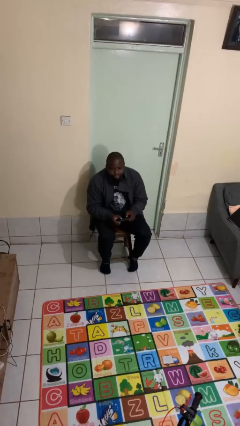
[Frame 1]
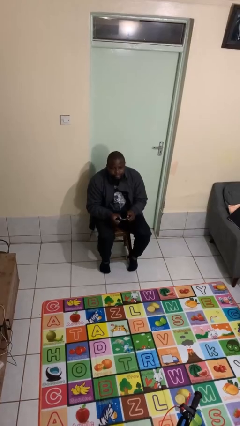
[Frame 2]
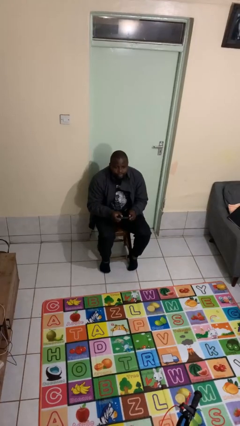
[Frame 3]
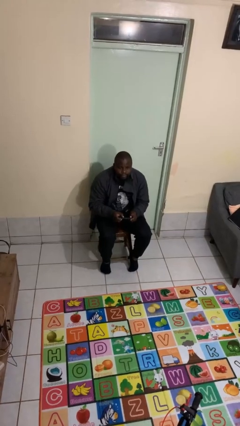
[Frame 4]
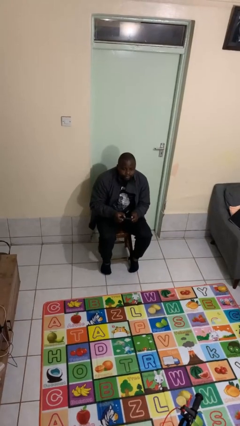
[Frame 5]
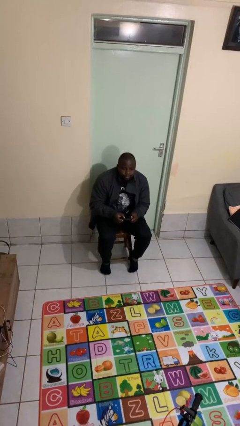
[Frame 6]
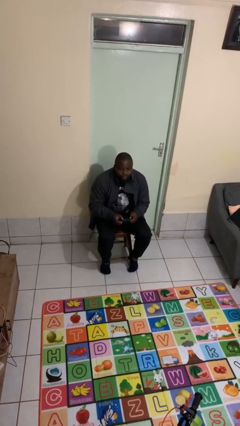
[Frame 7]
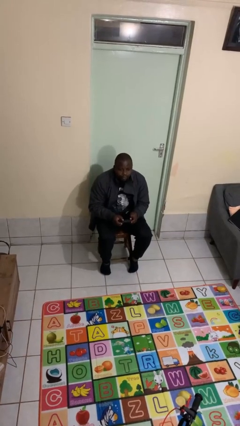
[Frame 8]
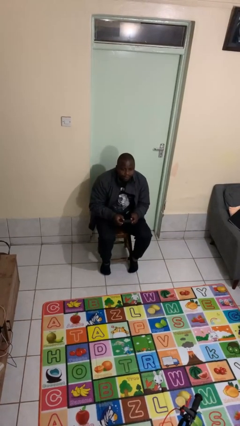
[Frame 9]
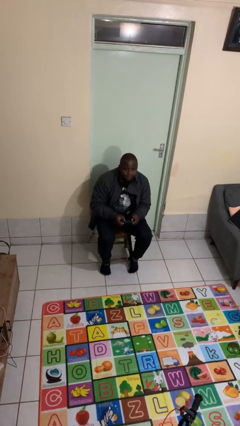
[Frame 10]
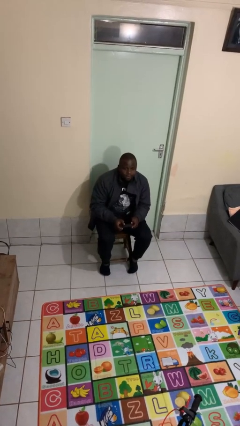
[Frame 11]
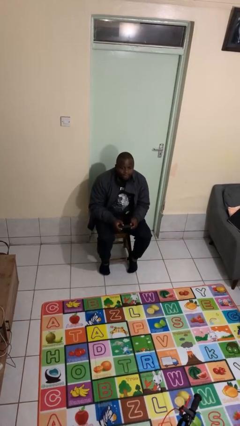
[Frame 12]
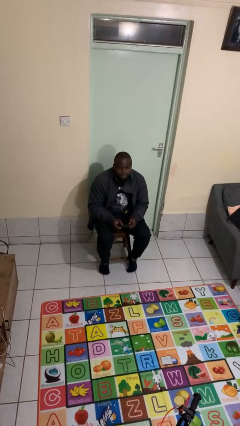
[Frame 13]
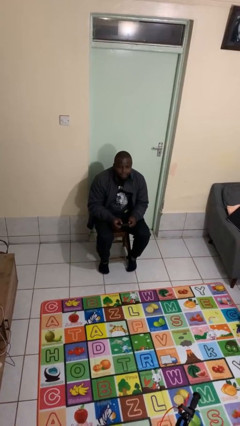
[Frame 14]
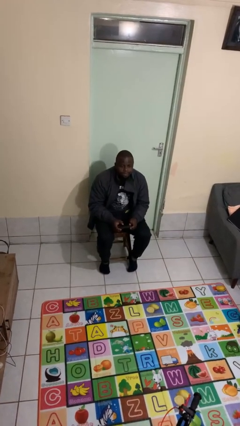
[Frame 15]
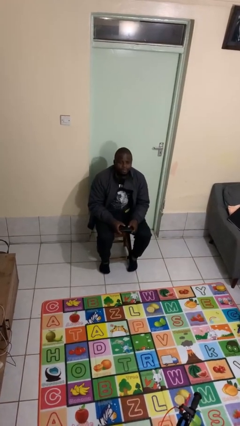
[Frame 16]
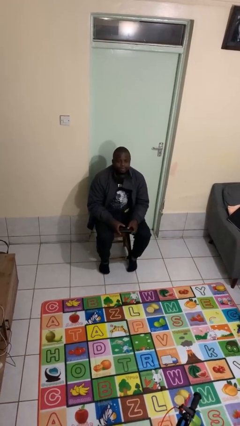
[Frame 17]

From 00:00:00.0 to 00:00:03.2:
person interacts with handheld game

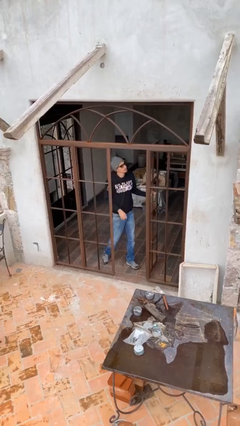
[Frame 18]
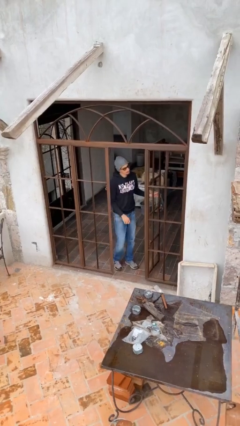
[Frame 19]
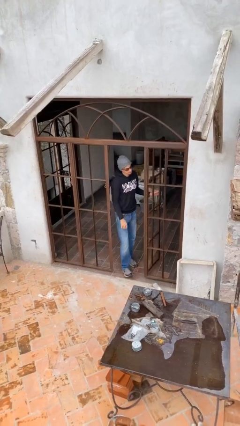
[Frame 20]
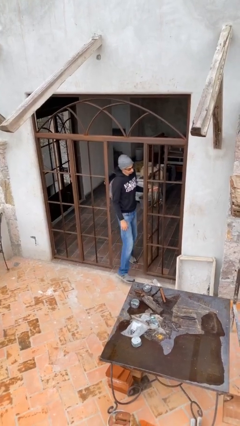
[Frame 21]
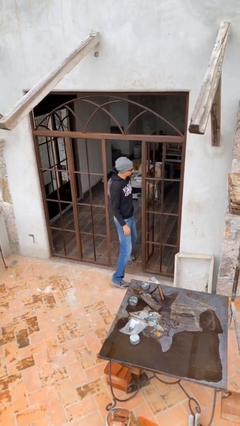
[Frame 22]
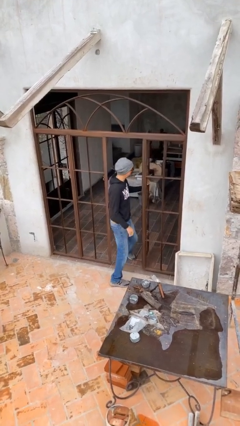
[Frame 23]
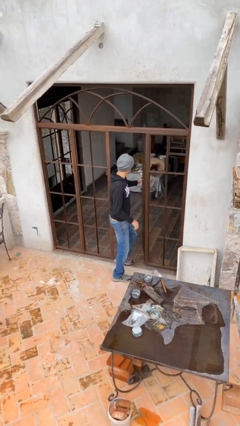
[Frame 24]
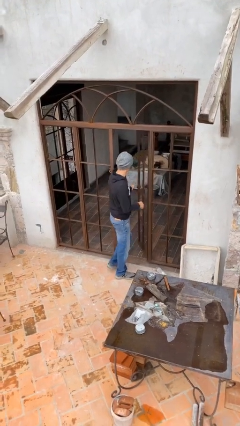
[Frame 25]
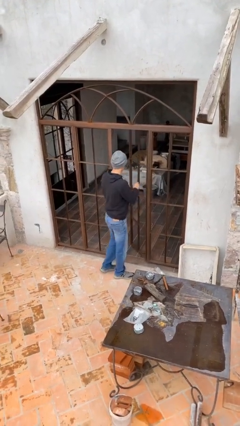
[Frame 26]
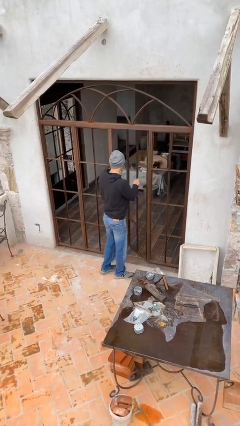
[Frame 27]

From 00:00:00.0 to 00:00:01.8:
person exits scene through structure

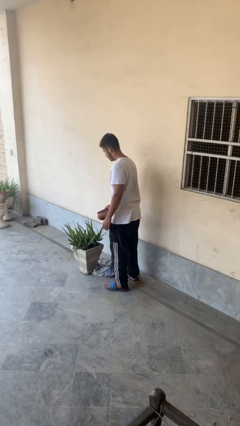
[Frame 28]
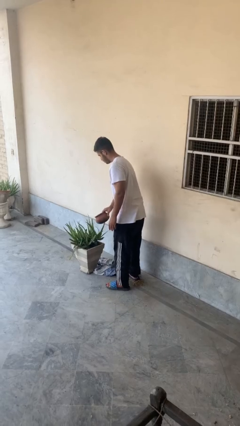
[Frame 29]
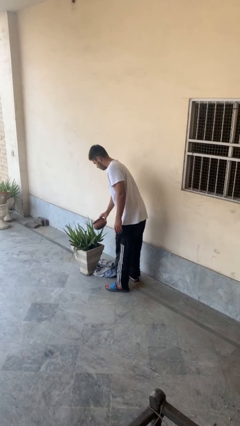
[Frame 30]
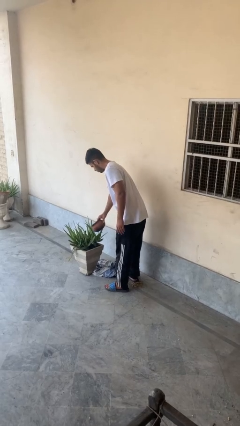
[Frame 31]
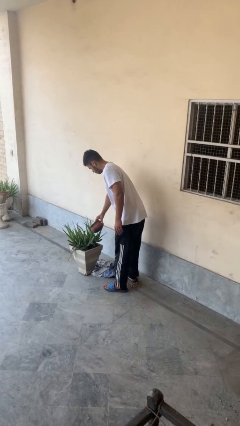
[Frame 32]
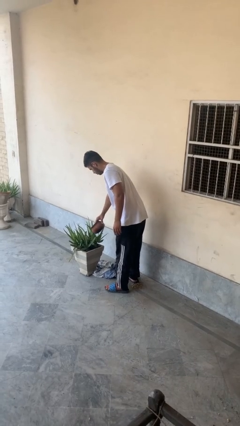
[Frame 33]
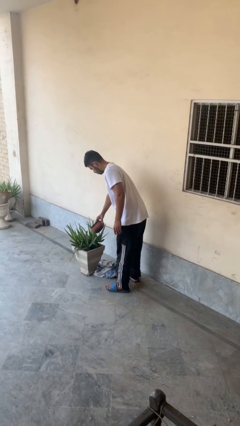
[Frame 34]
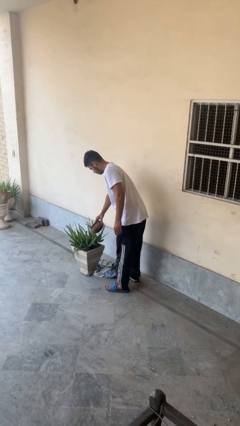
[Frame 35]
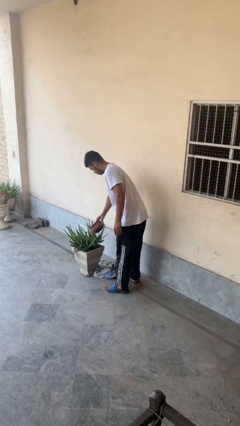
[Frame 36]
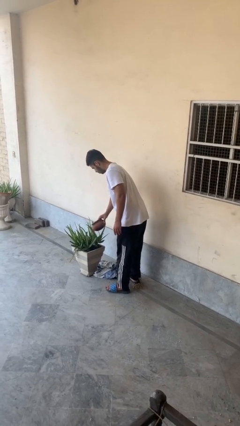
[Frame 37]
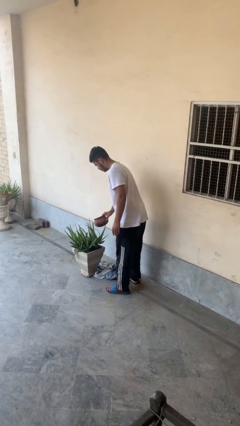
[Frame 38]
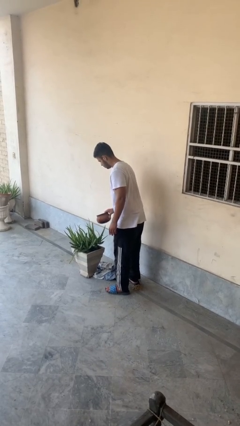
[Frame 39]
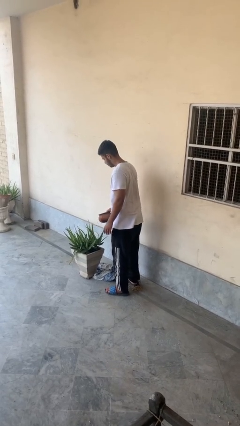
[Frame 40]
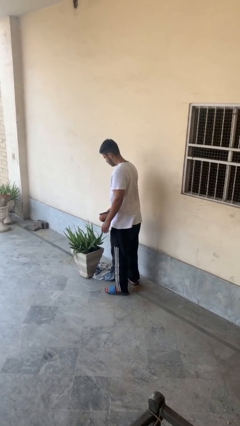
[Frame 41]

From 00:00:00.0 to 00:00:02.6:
person waters houseplant

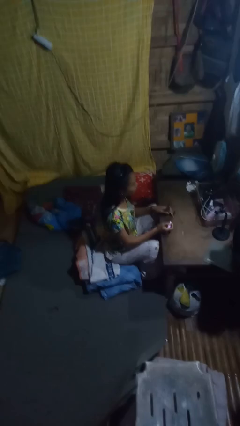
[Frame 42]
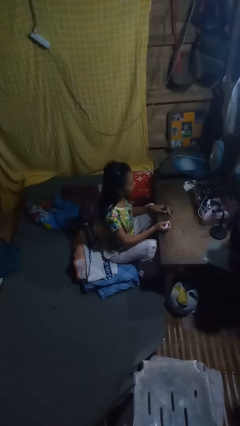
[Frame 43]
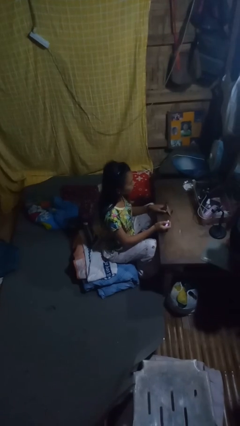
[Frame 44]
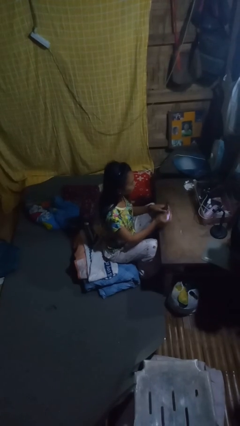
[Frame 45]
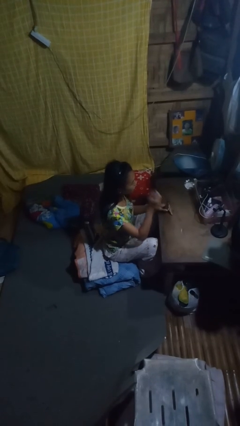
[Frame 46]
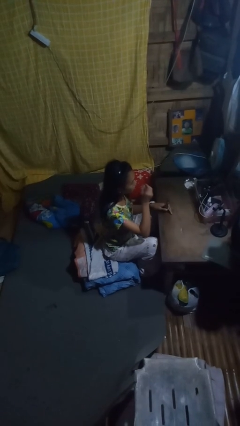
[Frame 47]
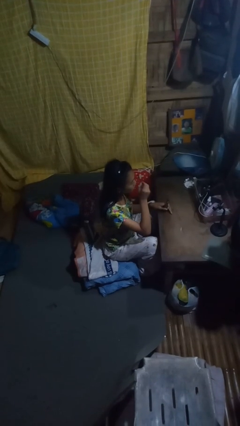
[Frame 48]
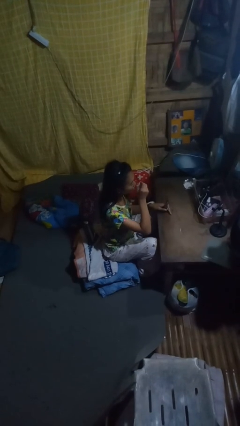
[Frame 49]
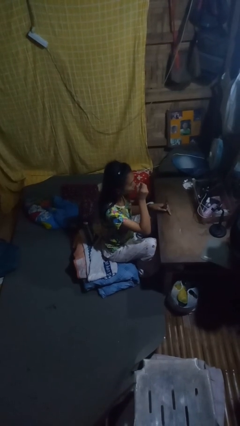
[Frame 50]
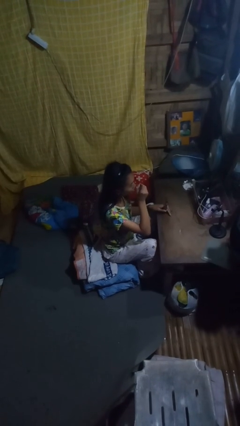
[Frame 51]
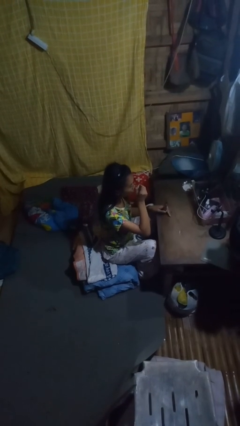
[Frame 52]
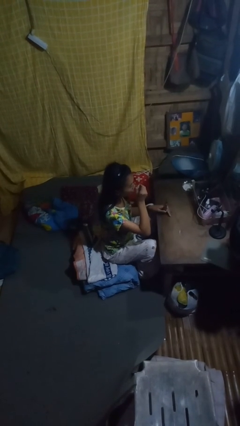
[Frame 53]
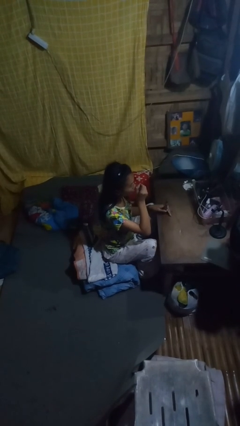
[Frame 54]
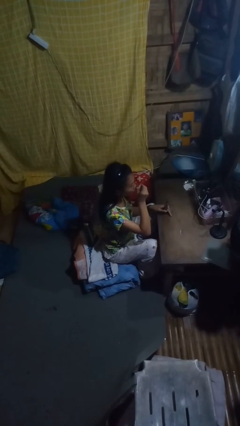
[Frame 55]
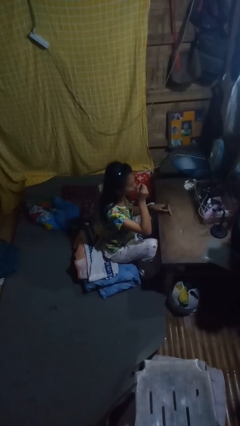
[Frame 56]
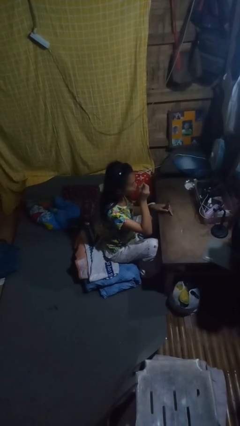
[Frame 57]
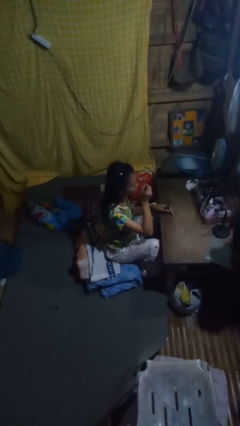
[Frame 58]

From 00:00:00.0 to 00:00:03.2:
person applies eye makeup

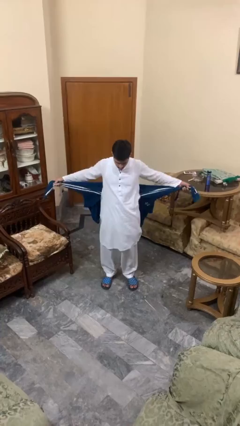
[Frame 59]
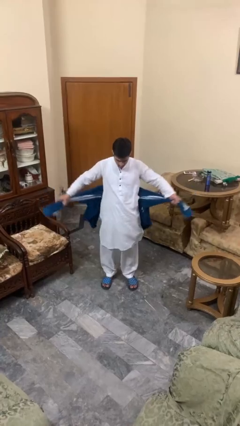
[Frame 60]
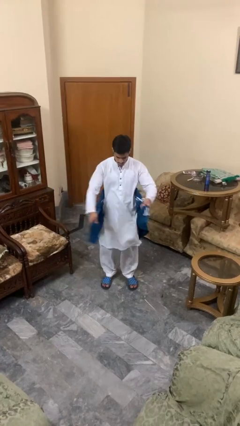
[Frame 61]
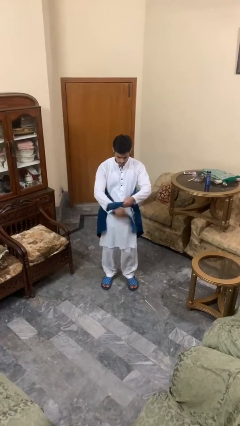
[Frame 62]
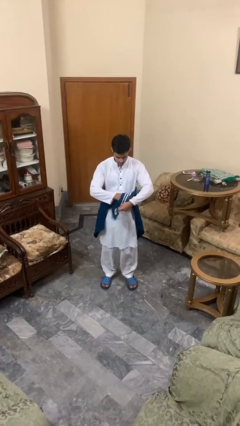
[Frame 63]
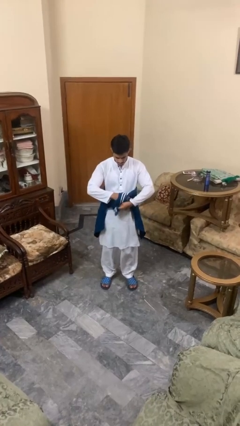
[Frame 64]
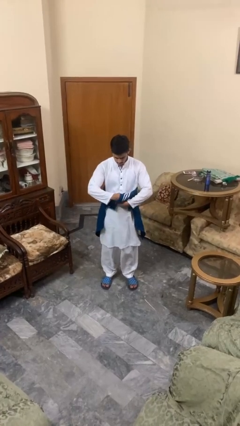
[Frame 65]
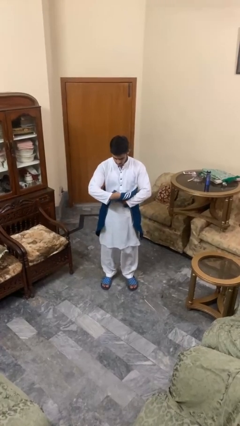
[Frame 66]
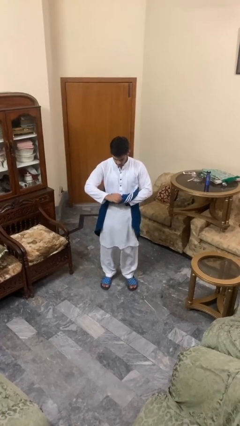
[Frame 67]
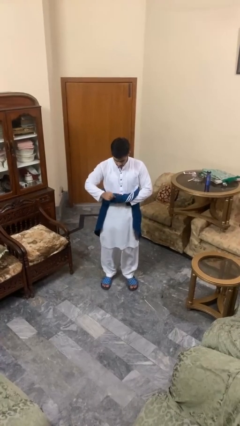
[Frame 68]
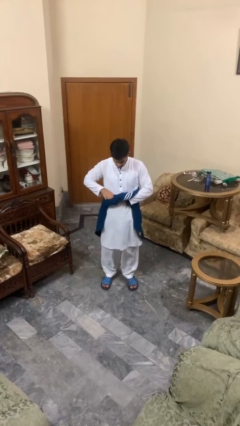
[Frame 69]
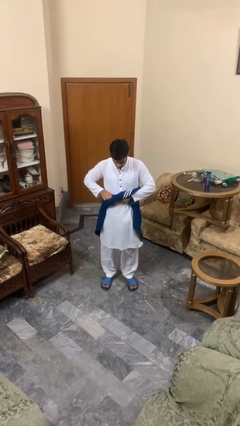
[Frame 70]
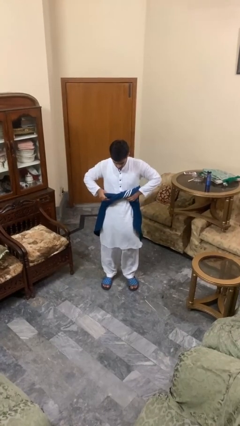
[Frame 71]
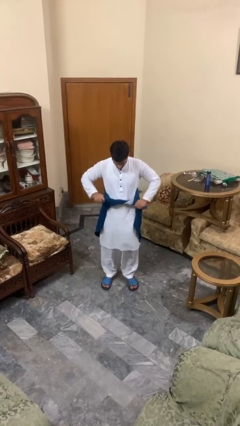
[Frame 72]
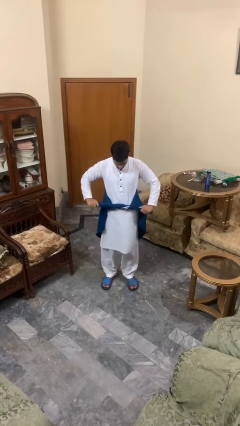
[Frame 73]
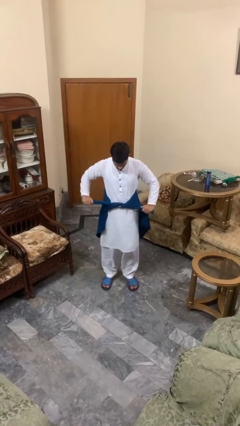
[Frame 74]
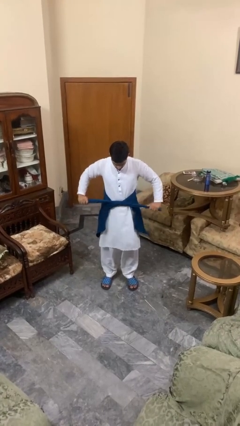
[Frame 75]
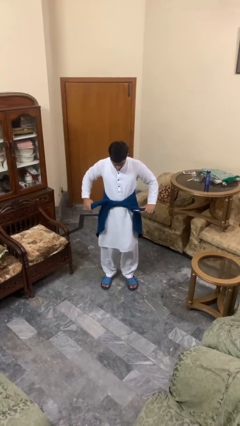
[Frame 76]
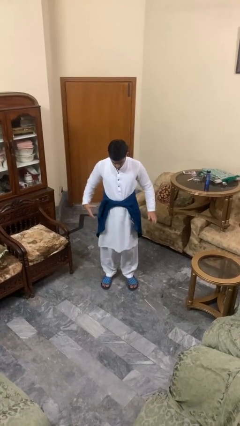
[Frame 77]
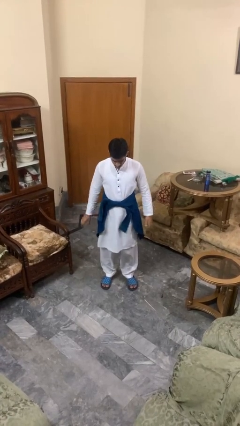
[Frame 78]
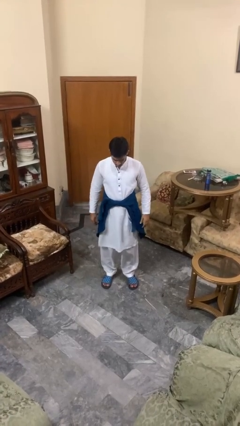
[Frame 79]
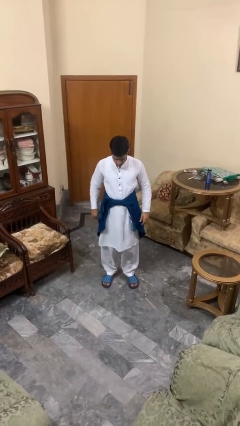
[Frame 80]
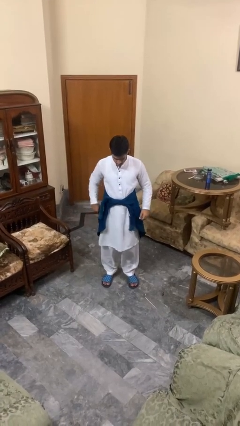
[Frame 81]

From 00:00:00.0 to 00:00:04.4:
person ties jacket around waist

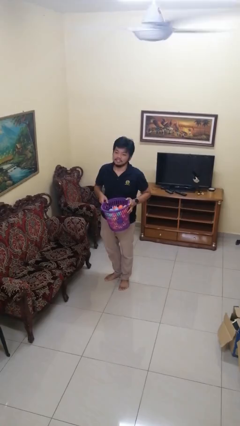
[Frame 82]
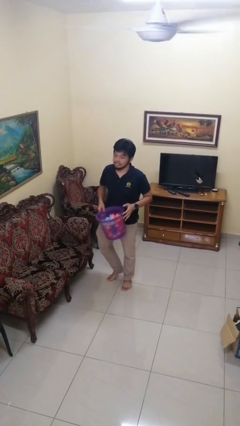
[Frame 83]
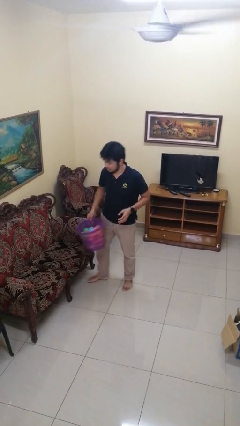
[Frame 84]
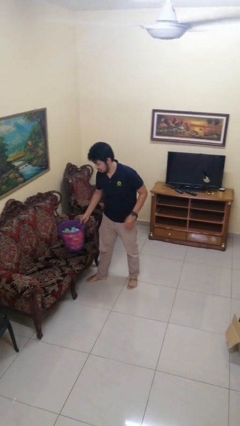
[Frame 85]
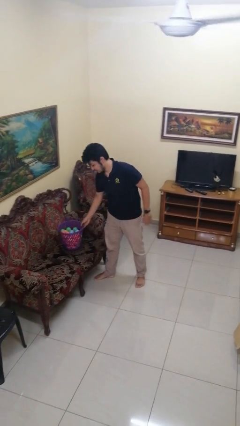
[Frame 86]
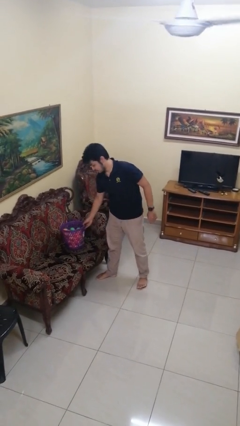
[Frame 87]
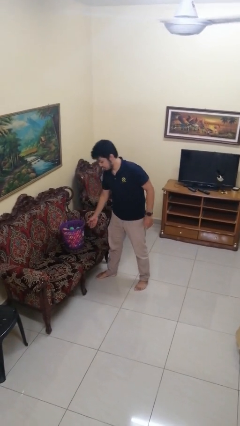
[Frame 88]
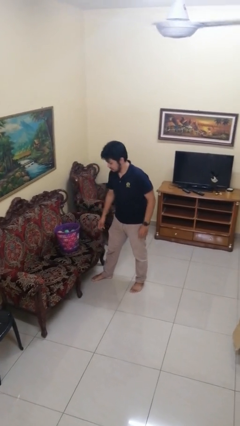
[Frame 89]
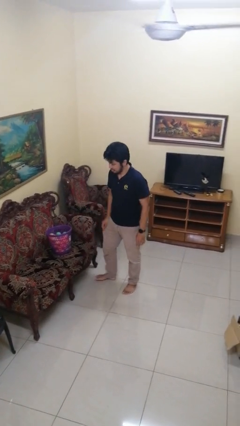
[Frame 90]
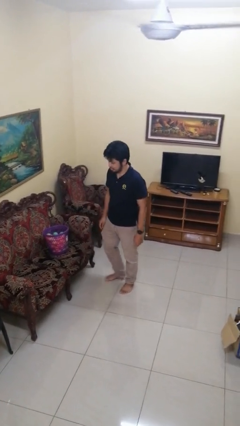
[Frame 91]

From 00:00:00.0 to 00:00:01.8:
person puts down object on couch

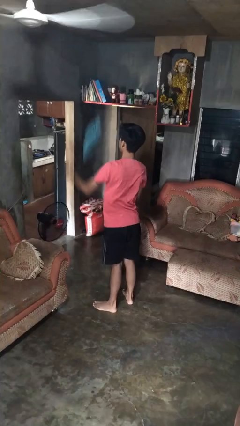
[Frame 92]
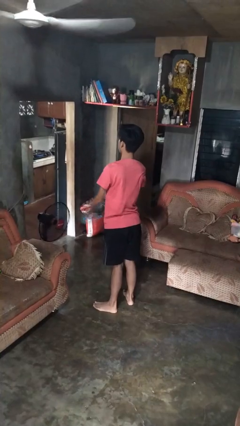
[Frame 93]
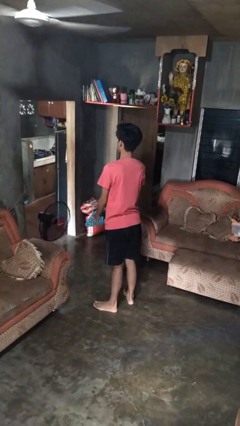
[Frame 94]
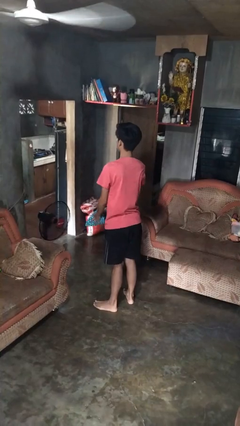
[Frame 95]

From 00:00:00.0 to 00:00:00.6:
person drops object
